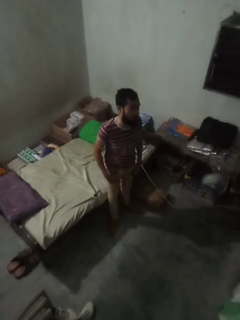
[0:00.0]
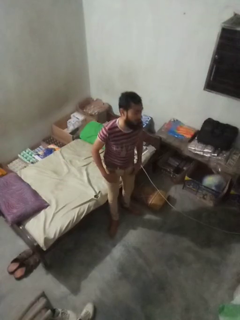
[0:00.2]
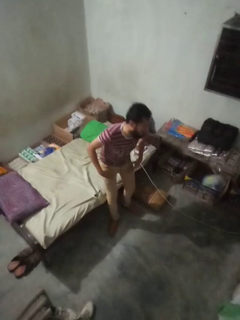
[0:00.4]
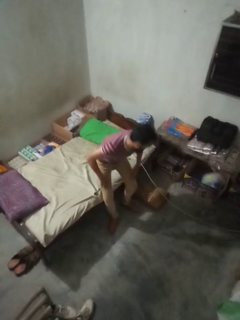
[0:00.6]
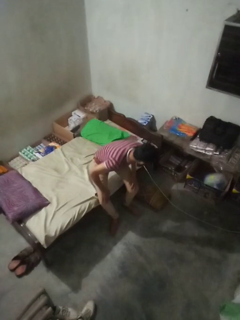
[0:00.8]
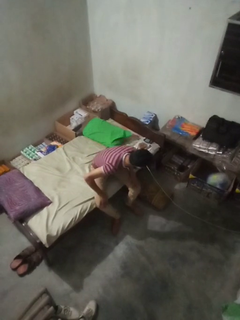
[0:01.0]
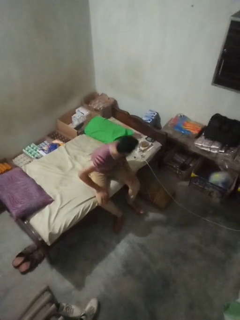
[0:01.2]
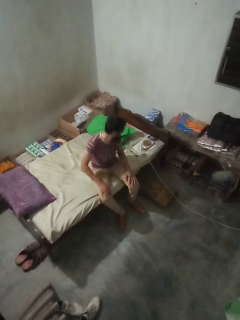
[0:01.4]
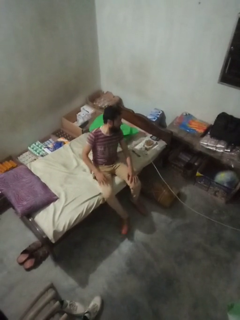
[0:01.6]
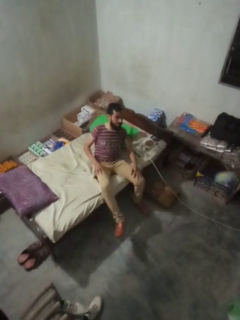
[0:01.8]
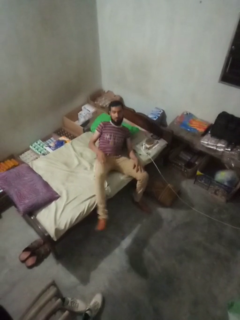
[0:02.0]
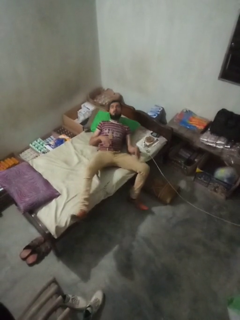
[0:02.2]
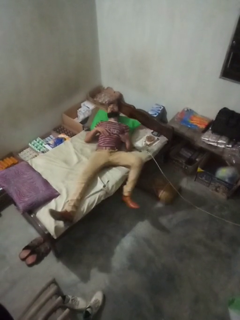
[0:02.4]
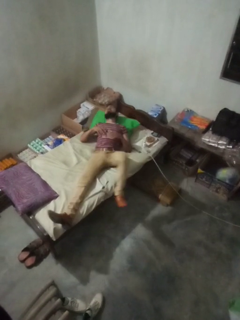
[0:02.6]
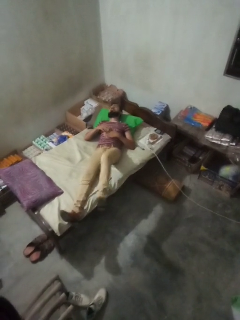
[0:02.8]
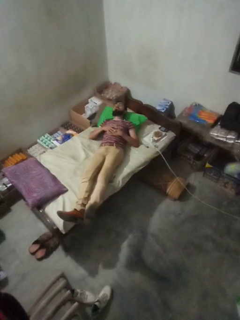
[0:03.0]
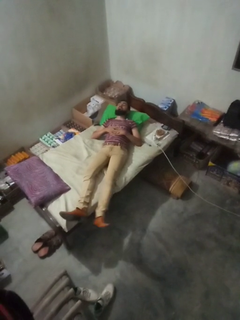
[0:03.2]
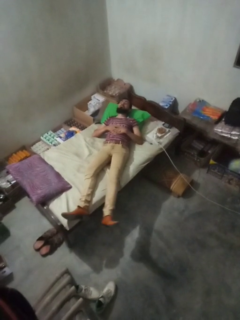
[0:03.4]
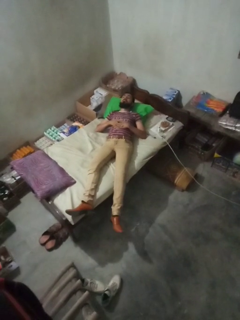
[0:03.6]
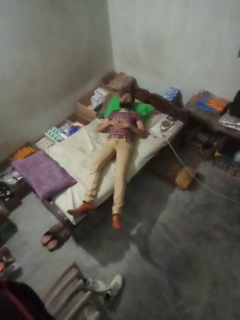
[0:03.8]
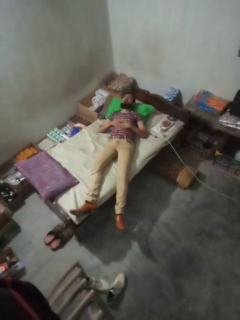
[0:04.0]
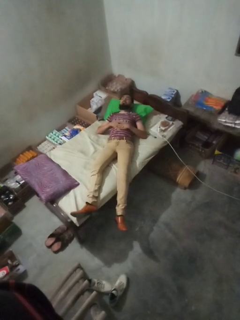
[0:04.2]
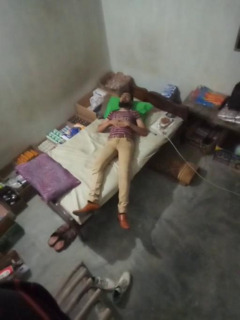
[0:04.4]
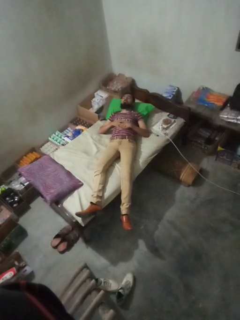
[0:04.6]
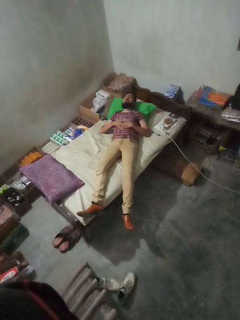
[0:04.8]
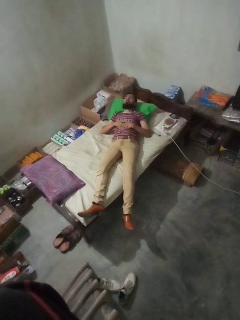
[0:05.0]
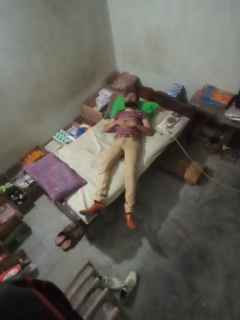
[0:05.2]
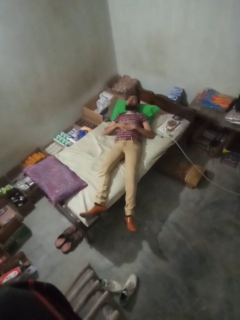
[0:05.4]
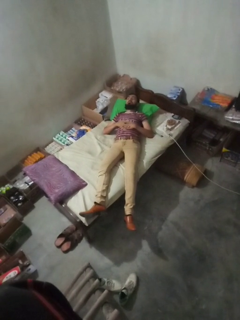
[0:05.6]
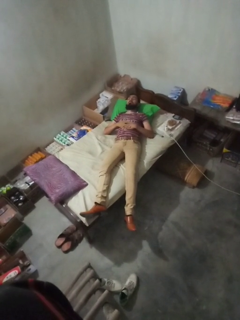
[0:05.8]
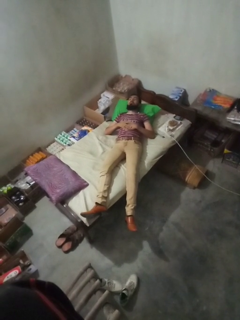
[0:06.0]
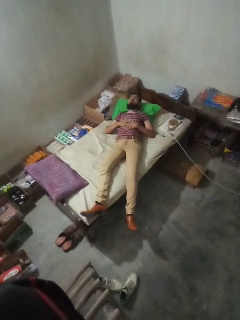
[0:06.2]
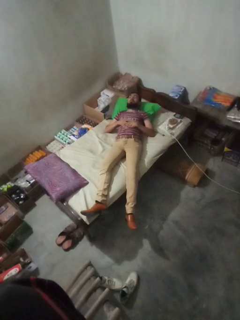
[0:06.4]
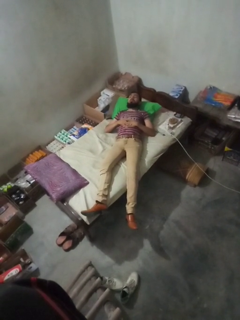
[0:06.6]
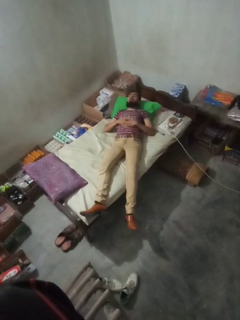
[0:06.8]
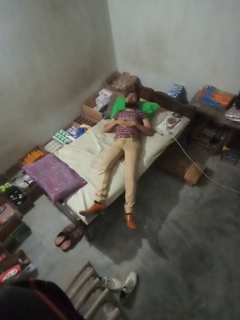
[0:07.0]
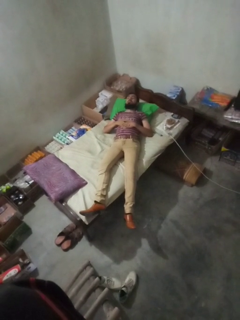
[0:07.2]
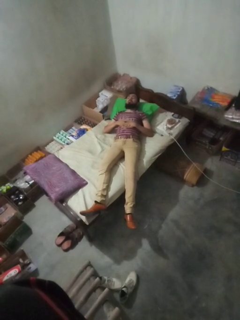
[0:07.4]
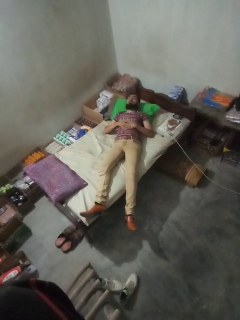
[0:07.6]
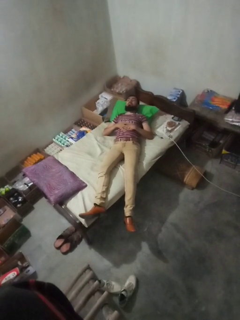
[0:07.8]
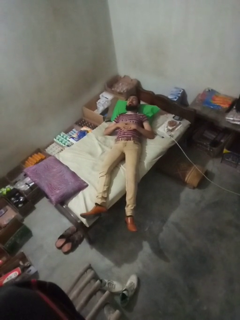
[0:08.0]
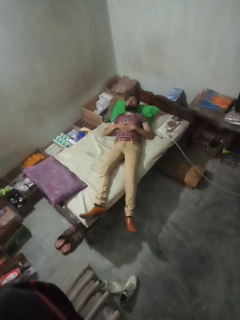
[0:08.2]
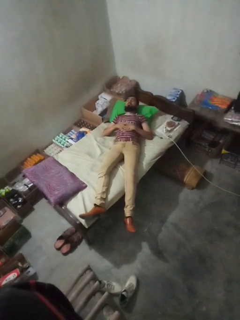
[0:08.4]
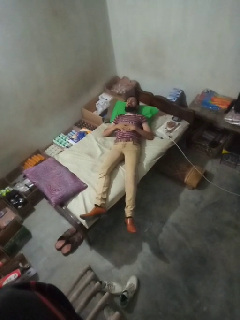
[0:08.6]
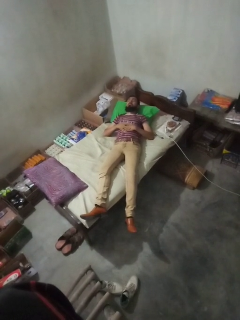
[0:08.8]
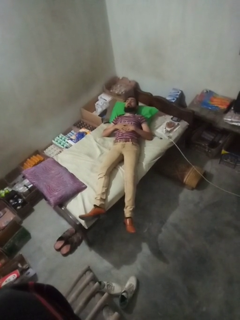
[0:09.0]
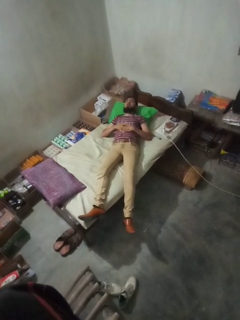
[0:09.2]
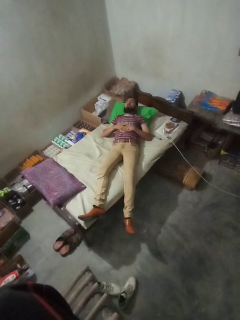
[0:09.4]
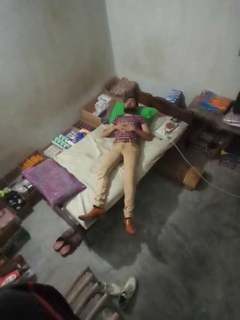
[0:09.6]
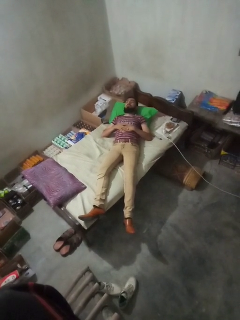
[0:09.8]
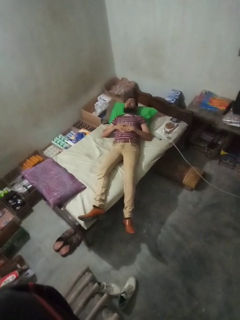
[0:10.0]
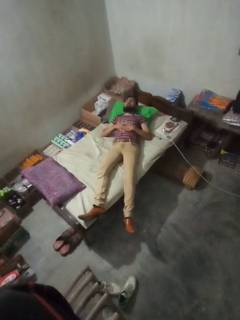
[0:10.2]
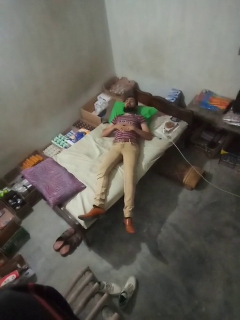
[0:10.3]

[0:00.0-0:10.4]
person lies down on bed

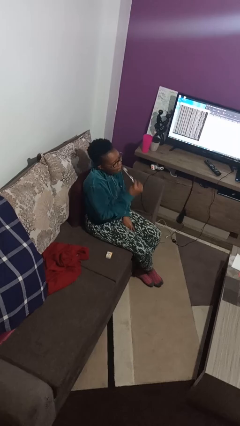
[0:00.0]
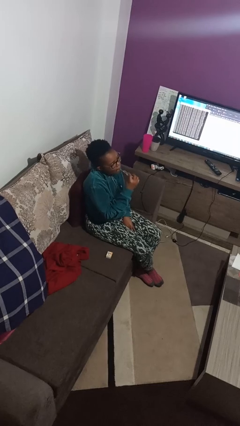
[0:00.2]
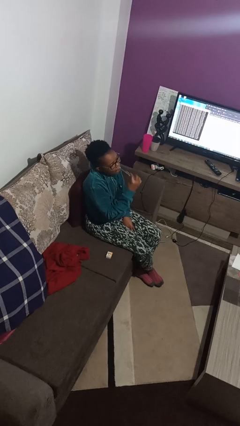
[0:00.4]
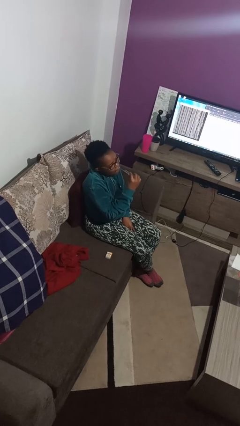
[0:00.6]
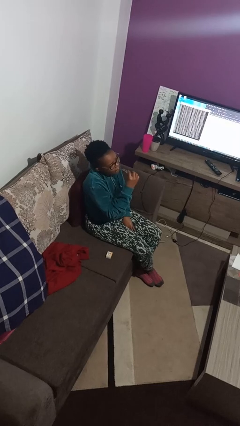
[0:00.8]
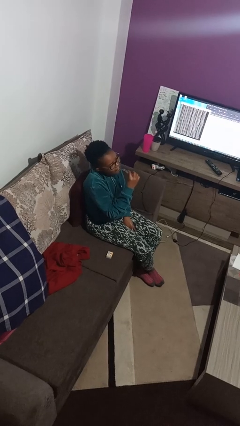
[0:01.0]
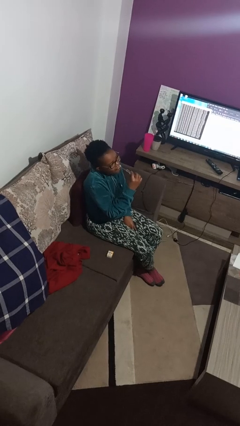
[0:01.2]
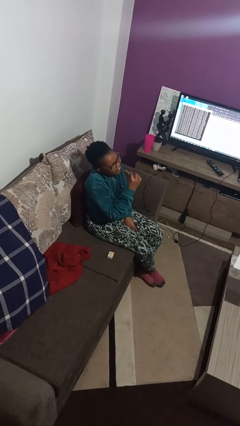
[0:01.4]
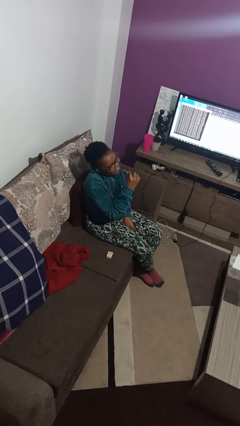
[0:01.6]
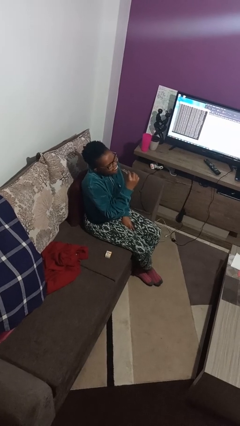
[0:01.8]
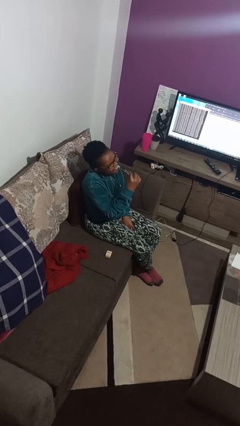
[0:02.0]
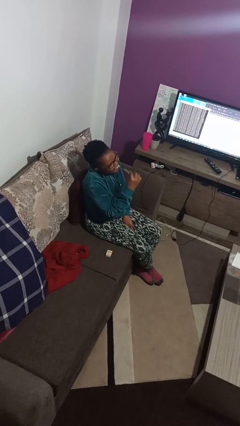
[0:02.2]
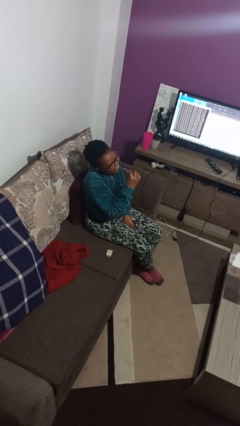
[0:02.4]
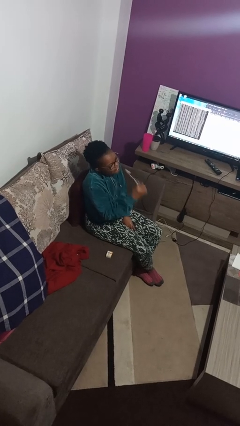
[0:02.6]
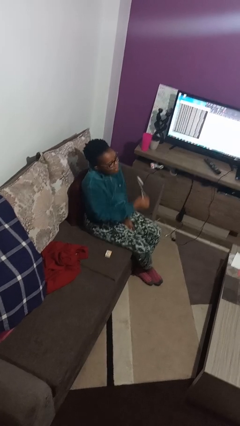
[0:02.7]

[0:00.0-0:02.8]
person brushes teeth

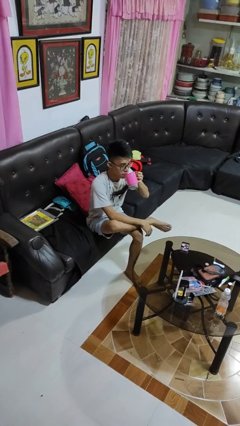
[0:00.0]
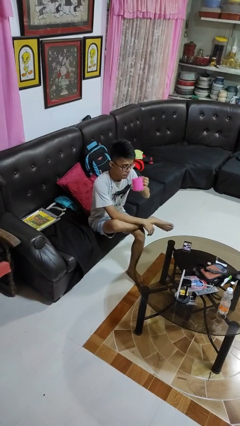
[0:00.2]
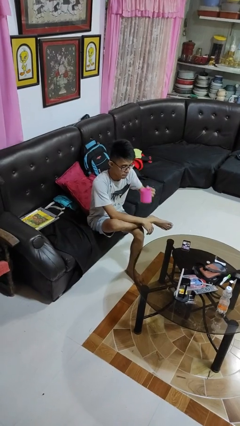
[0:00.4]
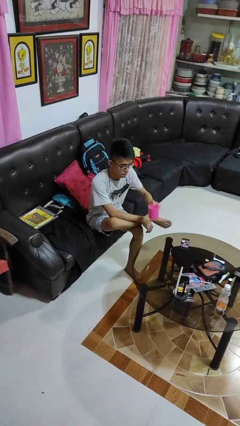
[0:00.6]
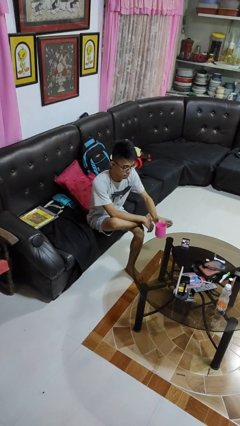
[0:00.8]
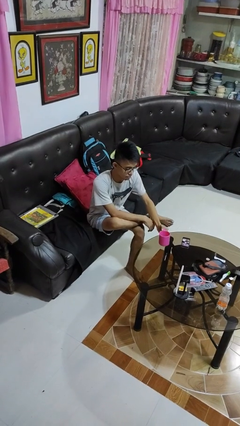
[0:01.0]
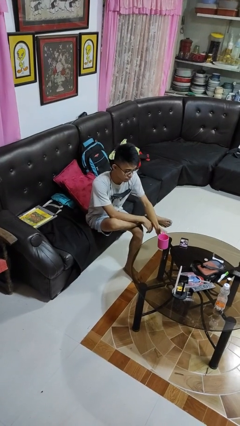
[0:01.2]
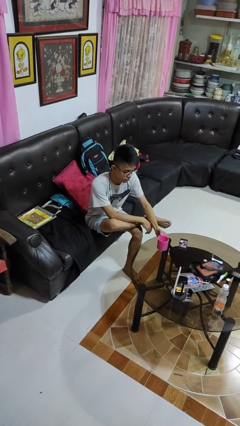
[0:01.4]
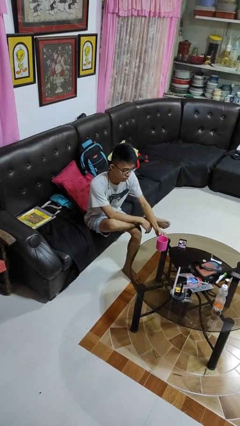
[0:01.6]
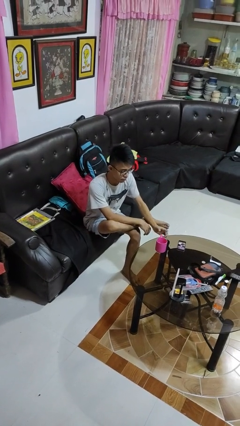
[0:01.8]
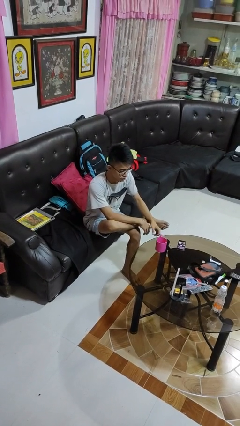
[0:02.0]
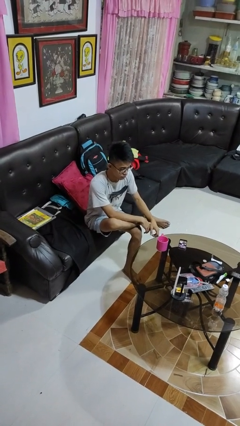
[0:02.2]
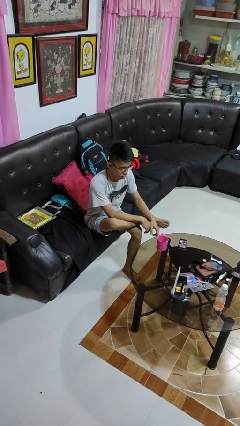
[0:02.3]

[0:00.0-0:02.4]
person puts down object on table

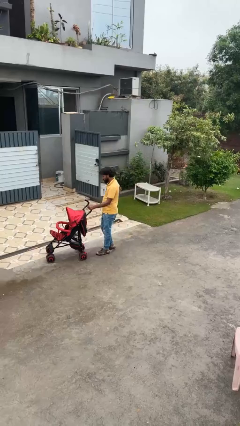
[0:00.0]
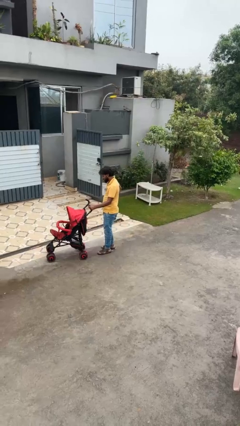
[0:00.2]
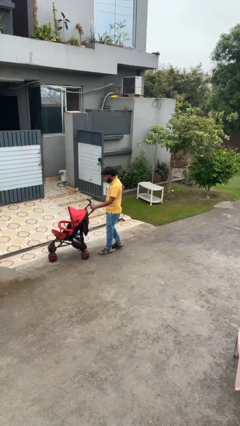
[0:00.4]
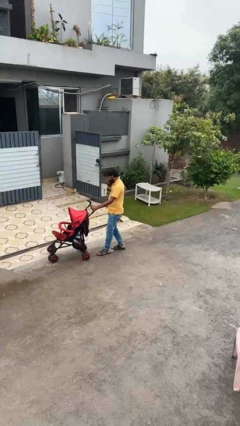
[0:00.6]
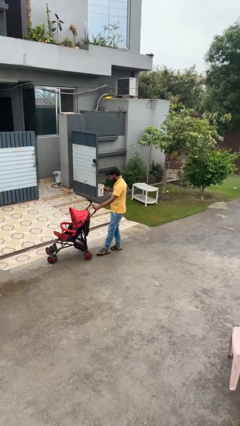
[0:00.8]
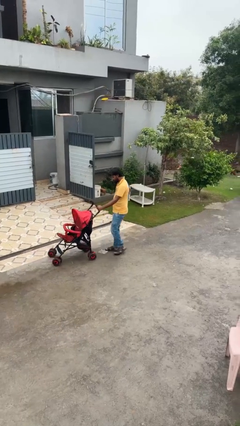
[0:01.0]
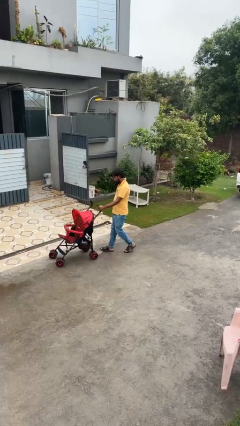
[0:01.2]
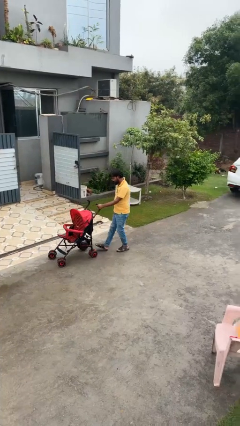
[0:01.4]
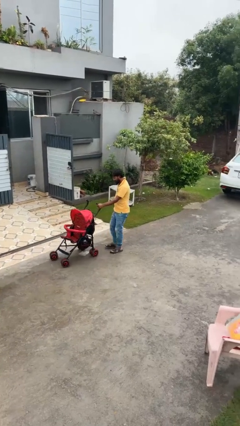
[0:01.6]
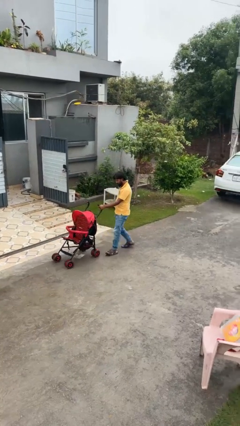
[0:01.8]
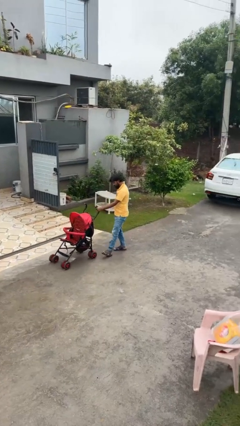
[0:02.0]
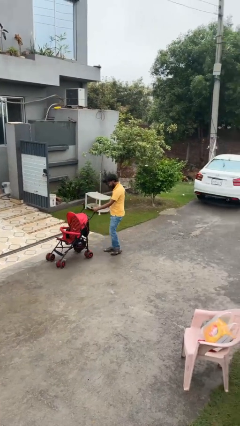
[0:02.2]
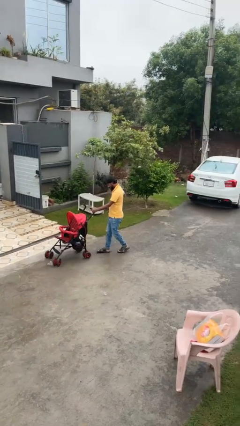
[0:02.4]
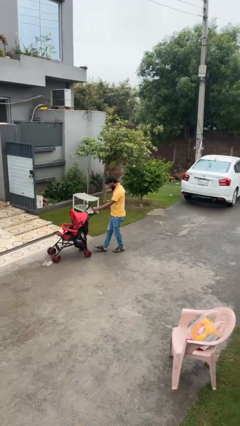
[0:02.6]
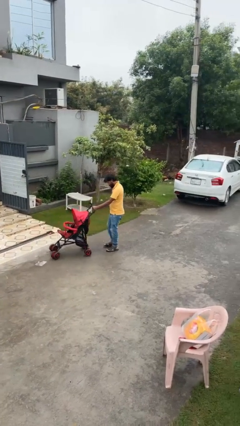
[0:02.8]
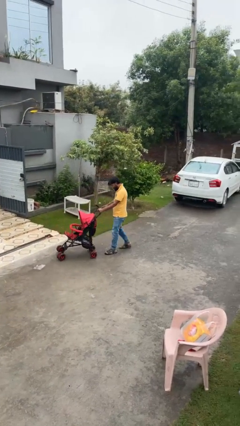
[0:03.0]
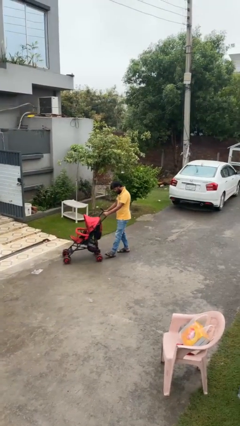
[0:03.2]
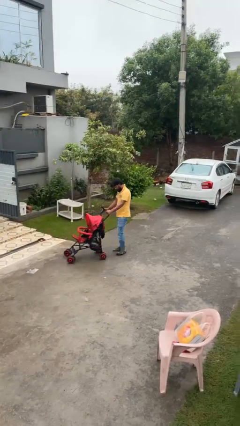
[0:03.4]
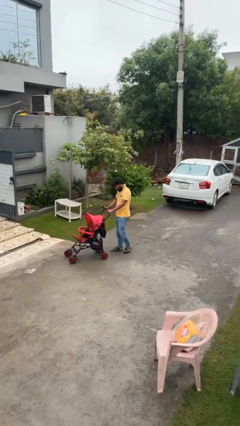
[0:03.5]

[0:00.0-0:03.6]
person pulls wheeled cart

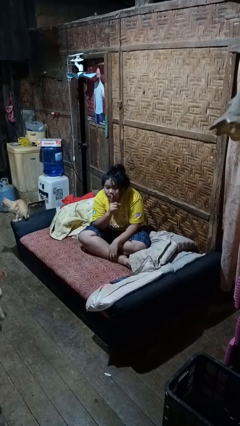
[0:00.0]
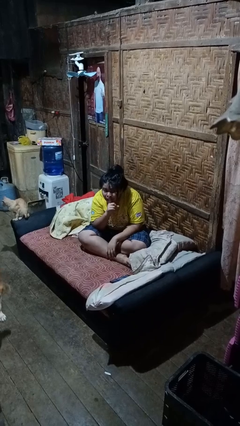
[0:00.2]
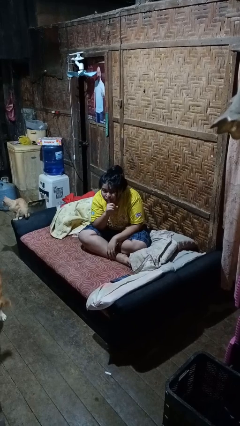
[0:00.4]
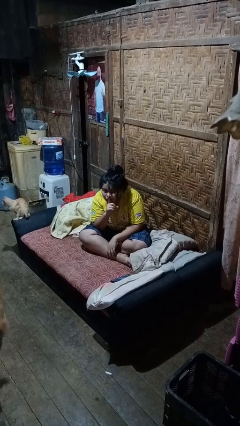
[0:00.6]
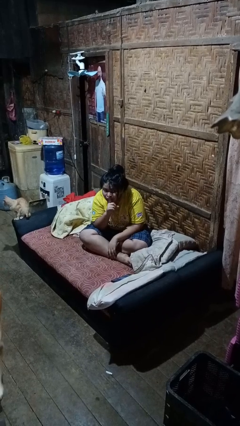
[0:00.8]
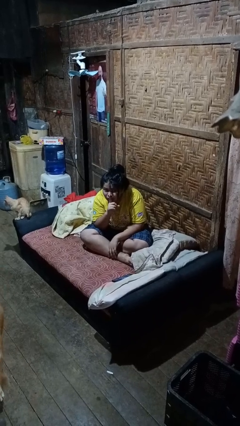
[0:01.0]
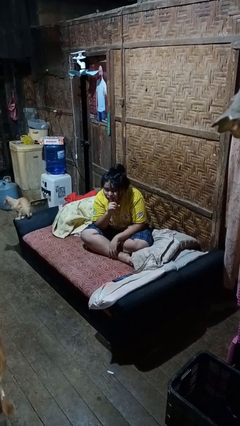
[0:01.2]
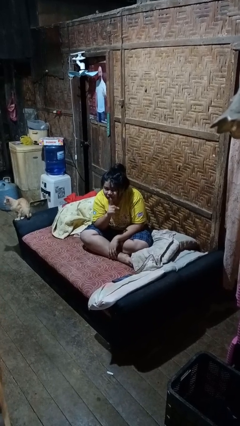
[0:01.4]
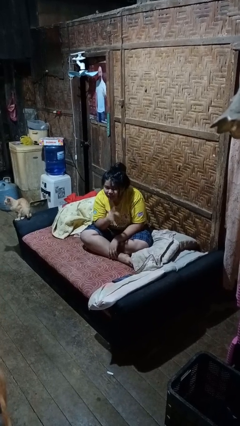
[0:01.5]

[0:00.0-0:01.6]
person gestures be quiet
